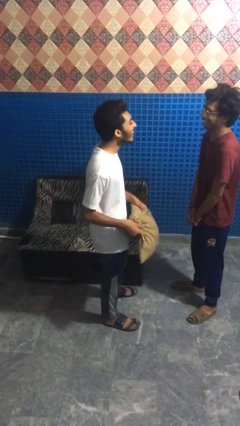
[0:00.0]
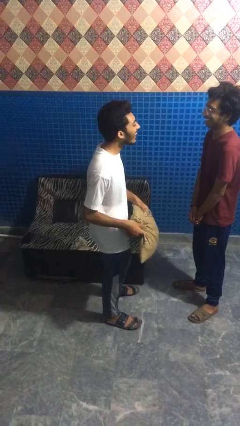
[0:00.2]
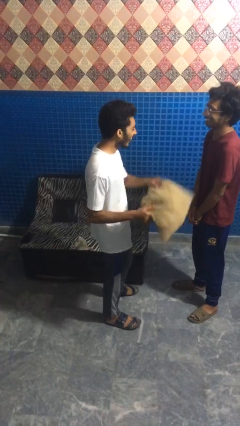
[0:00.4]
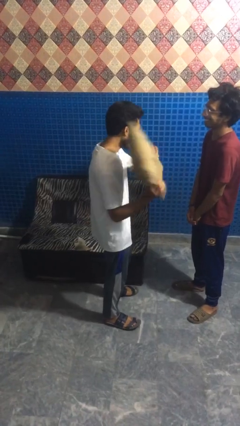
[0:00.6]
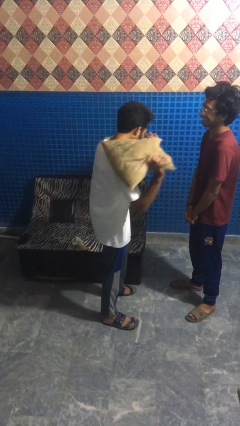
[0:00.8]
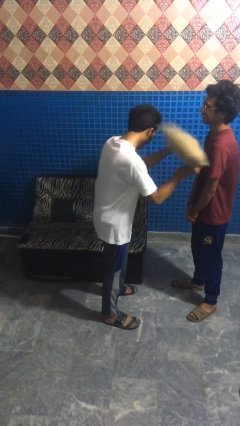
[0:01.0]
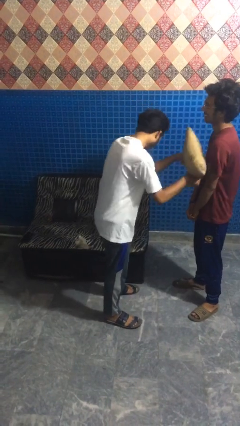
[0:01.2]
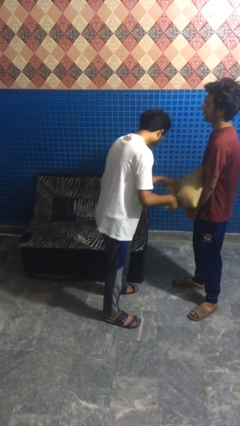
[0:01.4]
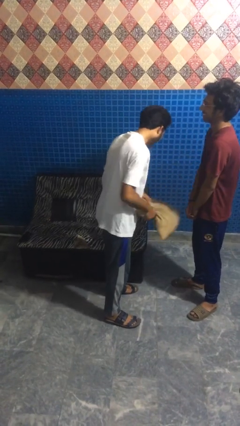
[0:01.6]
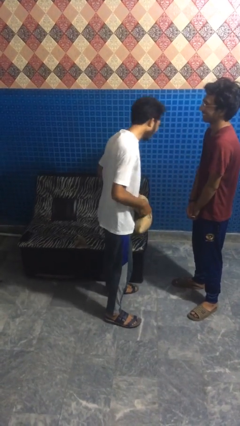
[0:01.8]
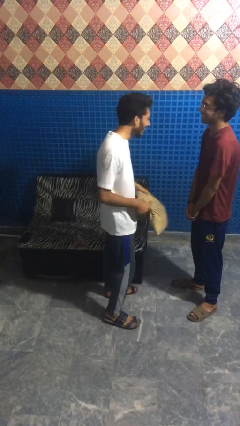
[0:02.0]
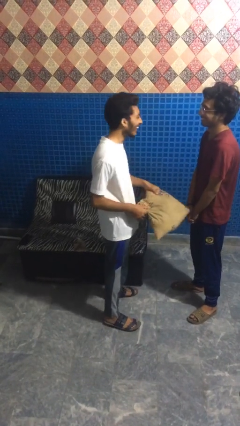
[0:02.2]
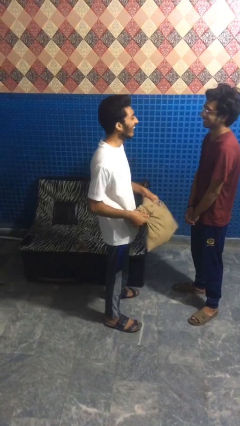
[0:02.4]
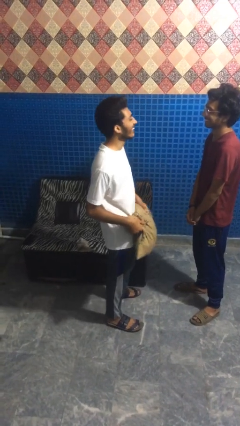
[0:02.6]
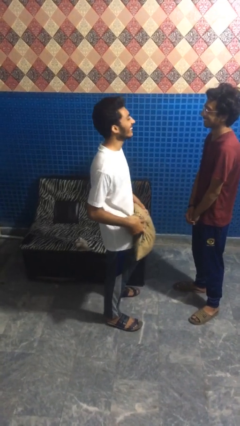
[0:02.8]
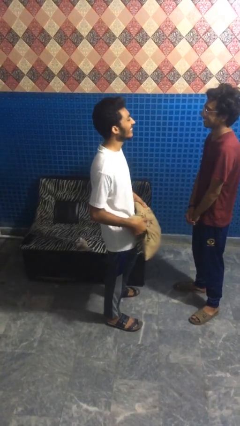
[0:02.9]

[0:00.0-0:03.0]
person hits person with pillow

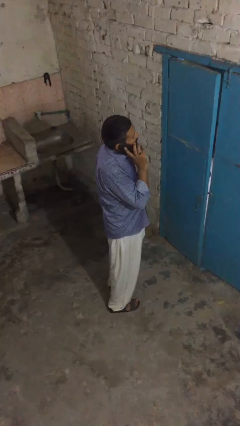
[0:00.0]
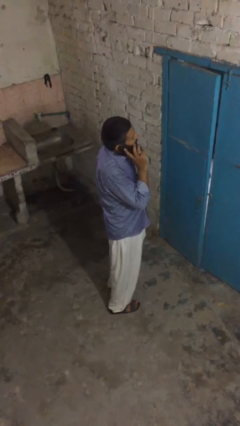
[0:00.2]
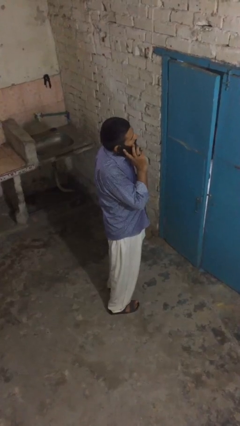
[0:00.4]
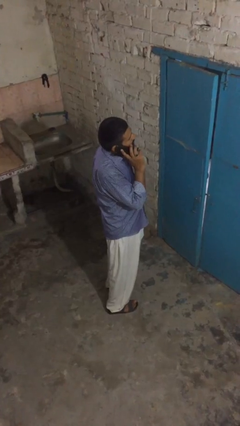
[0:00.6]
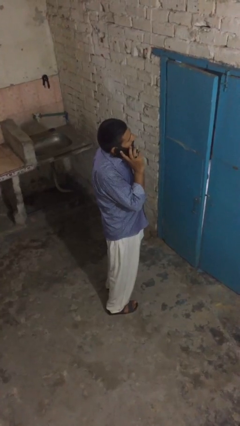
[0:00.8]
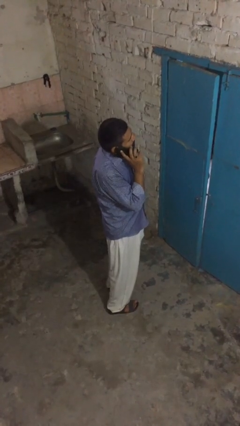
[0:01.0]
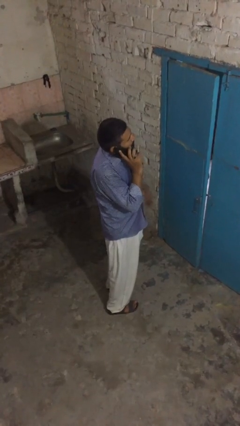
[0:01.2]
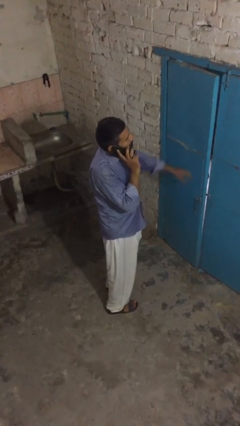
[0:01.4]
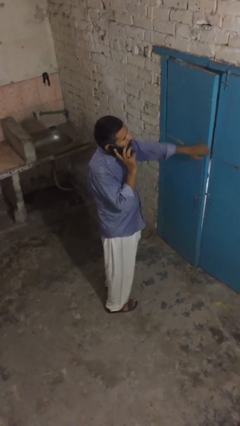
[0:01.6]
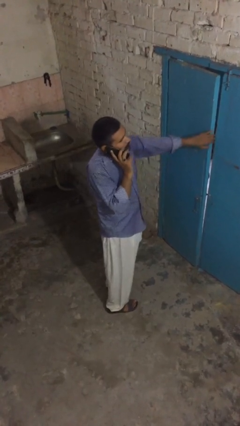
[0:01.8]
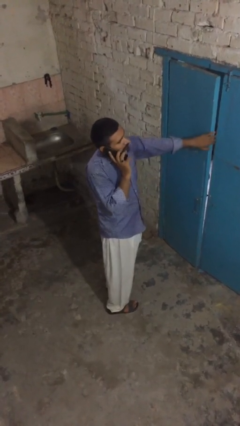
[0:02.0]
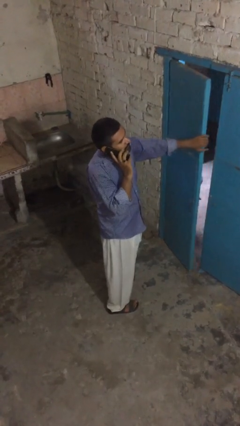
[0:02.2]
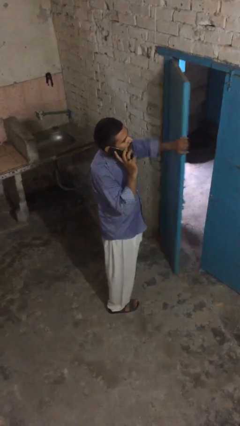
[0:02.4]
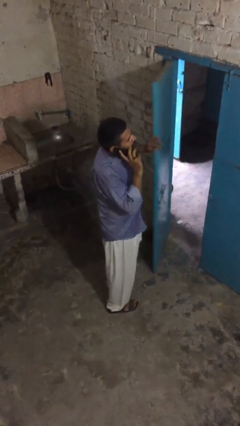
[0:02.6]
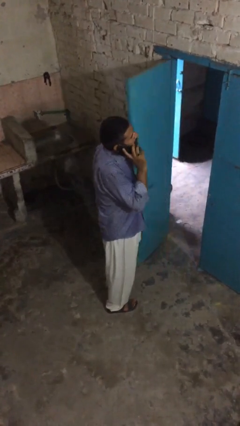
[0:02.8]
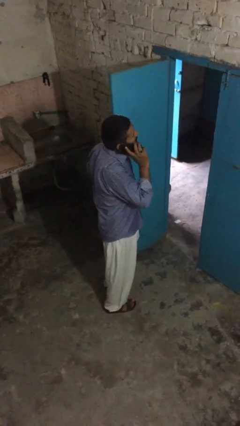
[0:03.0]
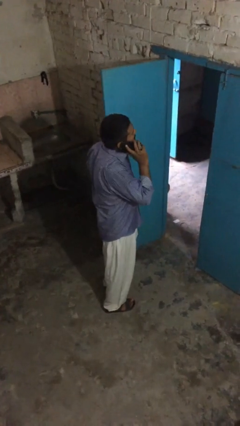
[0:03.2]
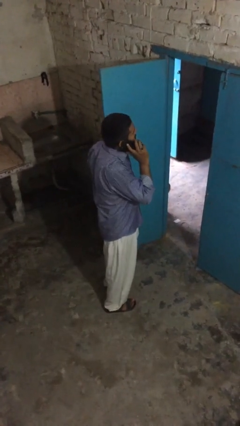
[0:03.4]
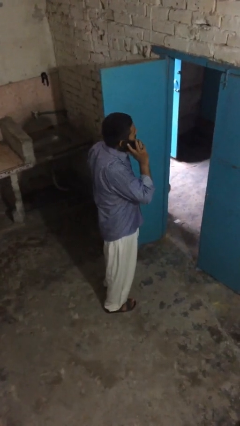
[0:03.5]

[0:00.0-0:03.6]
person opens facility door

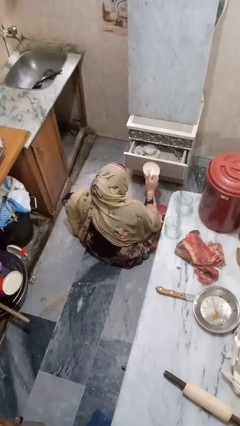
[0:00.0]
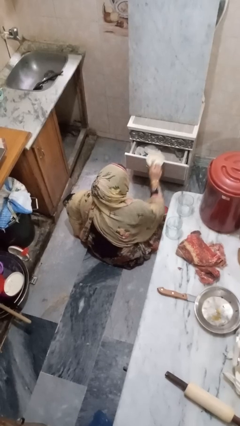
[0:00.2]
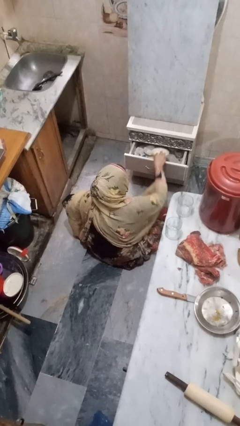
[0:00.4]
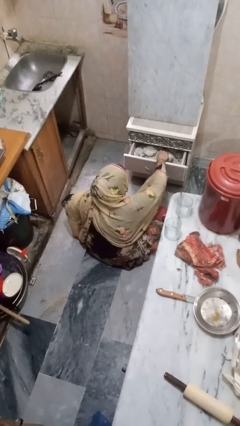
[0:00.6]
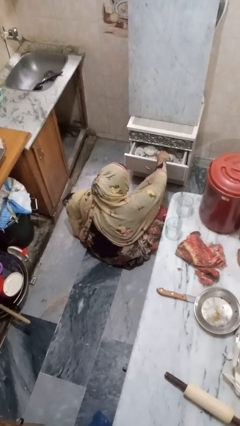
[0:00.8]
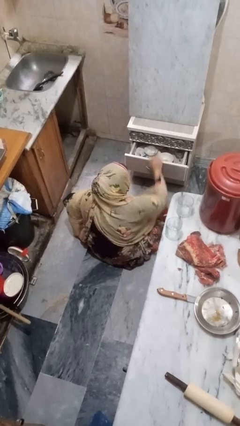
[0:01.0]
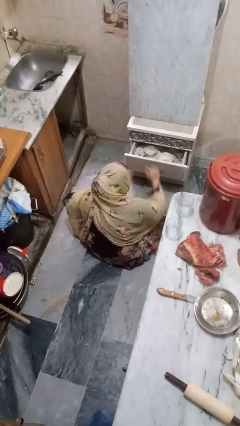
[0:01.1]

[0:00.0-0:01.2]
person puts object into kitchen drawer

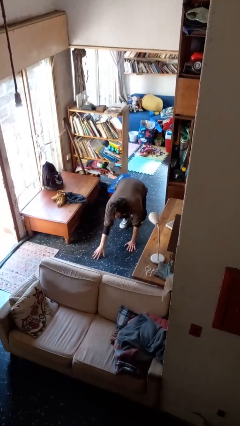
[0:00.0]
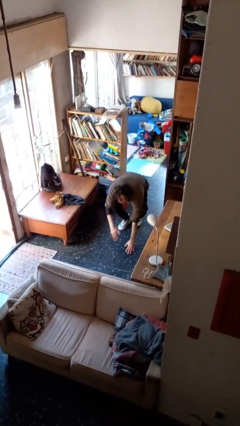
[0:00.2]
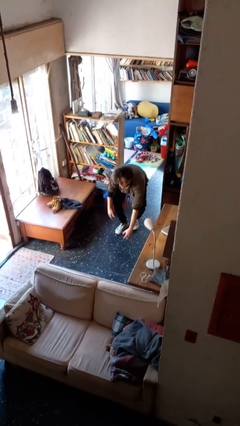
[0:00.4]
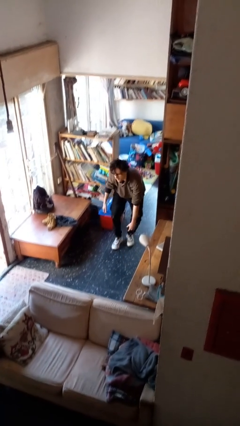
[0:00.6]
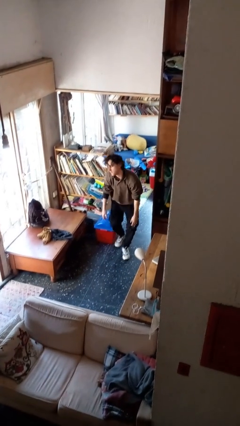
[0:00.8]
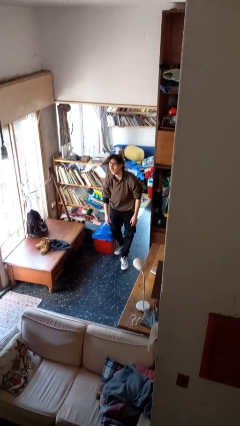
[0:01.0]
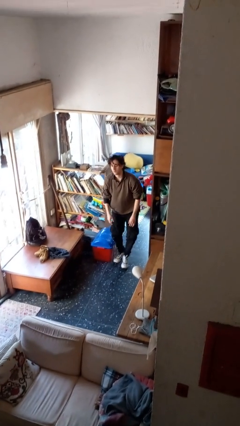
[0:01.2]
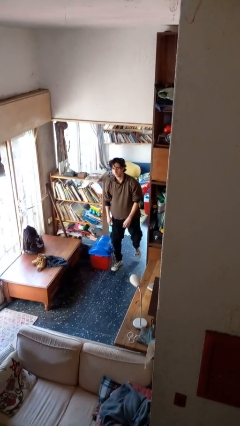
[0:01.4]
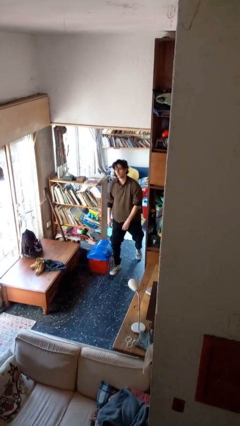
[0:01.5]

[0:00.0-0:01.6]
person stands up from floor

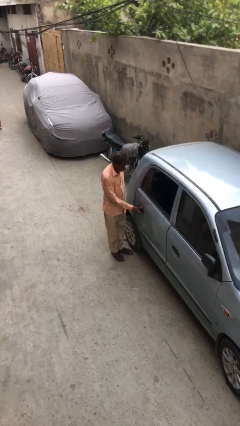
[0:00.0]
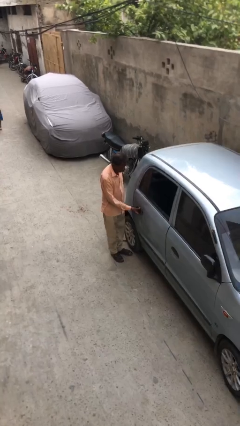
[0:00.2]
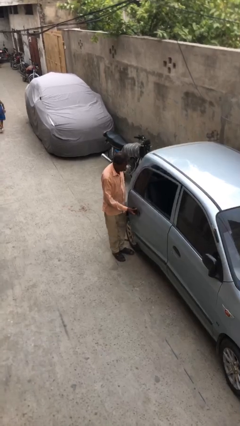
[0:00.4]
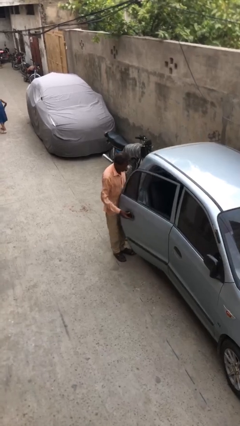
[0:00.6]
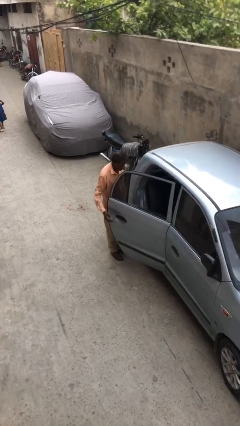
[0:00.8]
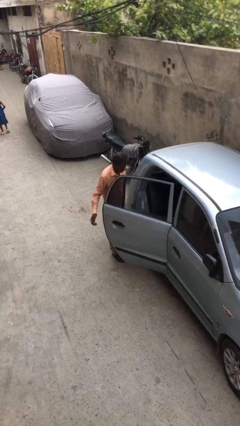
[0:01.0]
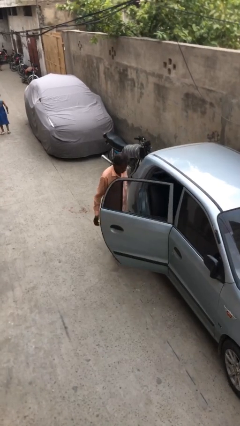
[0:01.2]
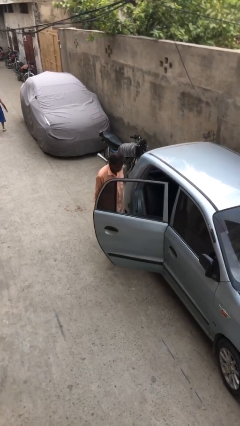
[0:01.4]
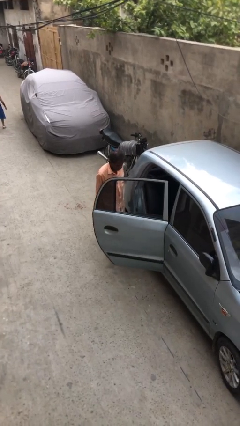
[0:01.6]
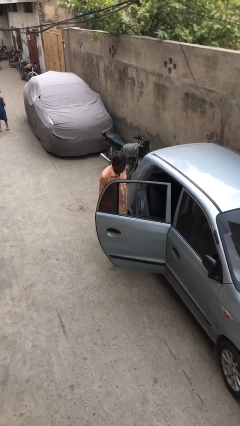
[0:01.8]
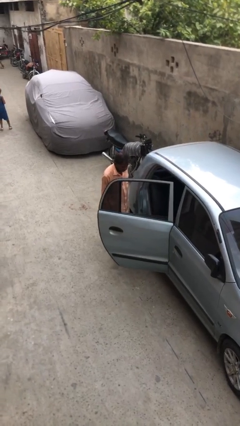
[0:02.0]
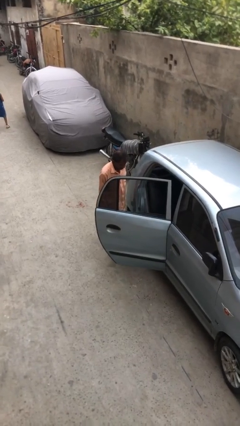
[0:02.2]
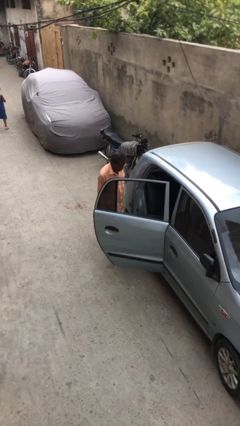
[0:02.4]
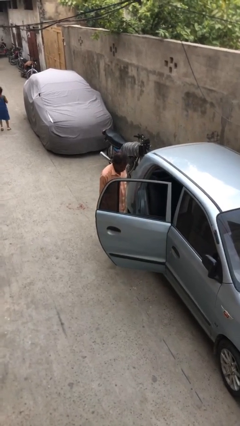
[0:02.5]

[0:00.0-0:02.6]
person opens car door

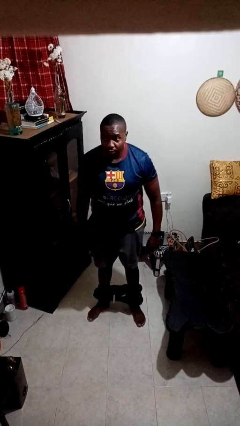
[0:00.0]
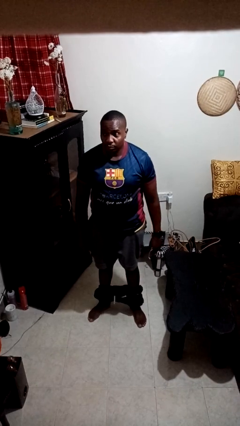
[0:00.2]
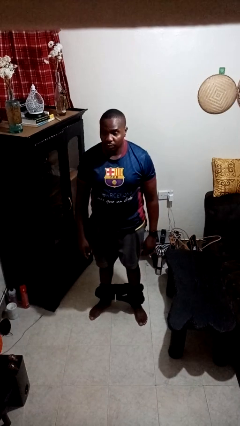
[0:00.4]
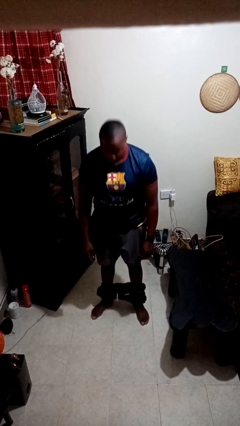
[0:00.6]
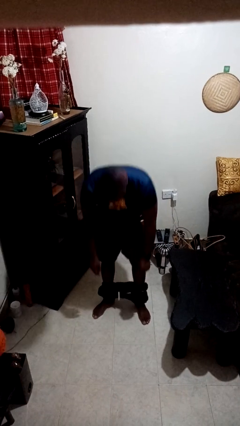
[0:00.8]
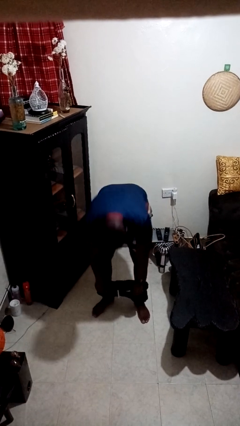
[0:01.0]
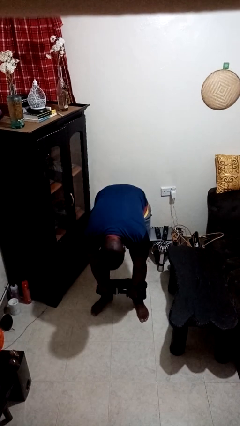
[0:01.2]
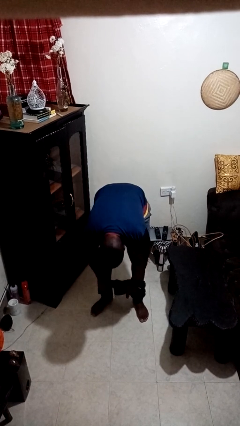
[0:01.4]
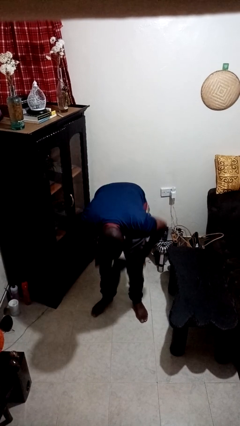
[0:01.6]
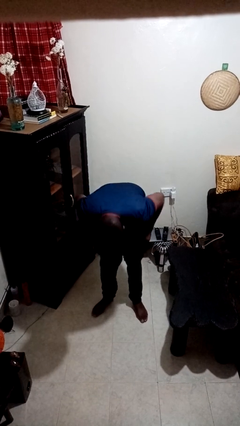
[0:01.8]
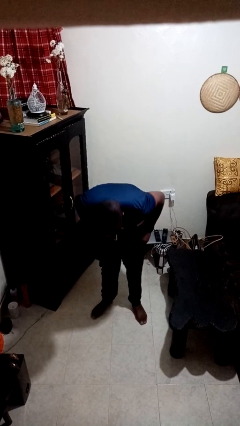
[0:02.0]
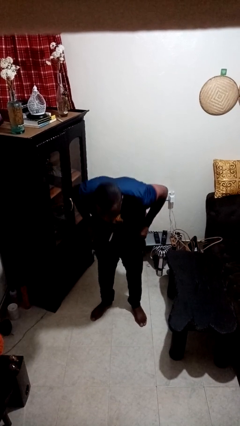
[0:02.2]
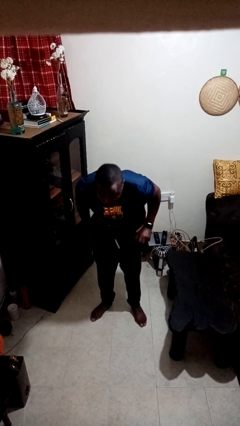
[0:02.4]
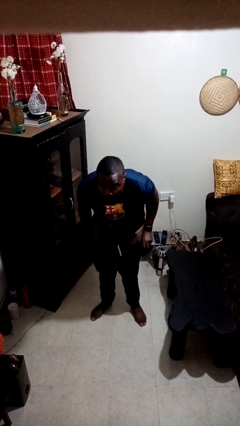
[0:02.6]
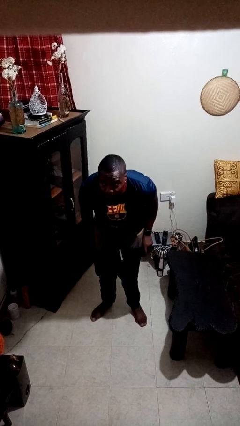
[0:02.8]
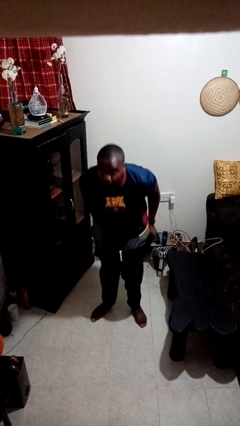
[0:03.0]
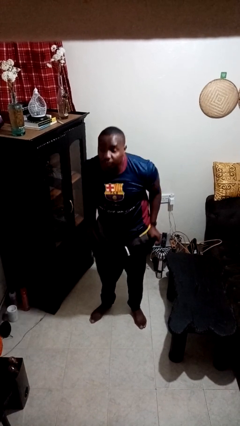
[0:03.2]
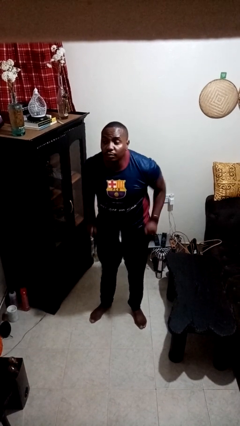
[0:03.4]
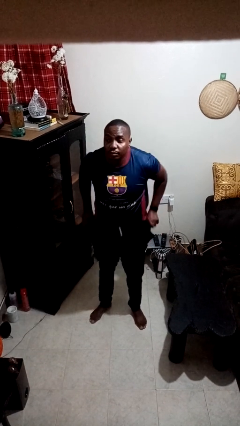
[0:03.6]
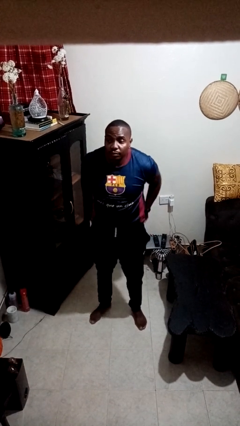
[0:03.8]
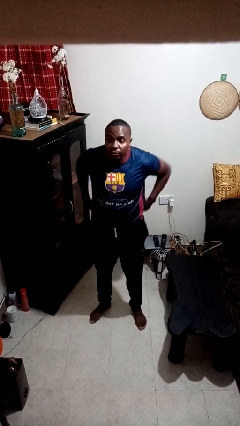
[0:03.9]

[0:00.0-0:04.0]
person puts on pants

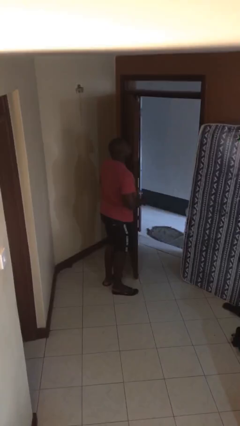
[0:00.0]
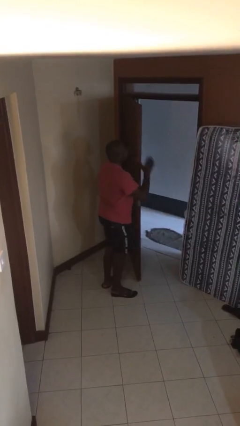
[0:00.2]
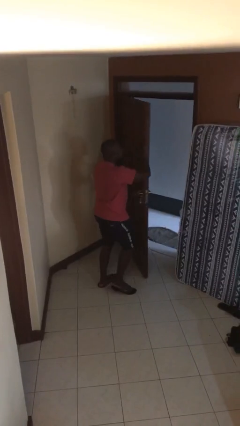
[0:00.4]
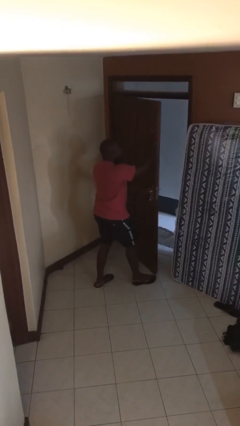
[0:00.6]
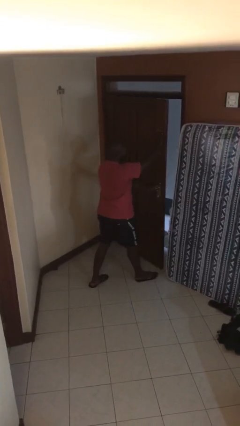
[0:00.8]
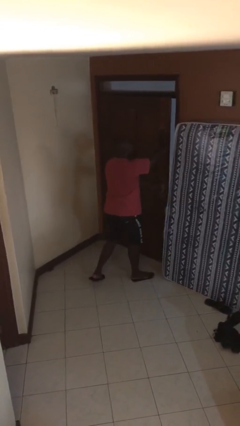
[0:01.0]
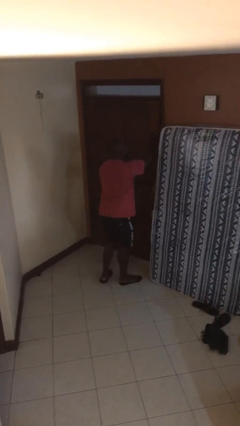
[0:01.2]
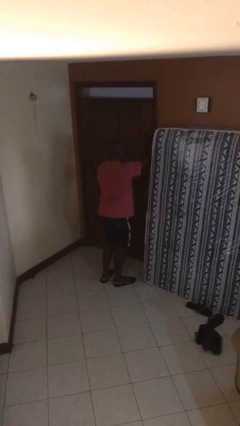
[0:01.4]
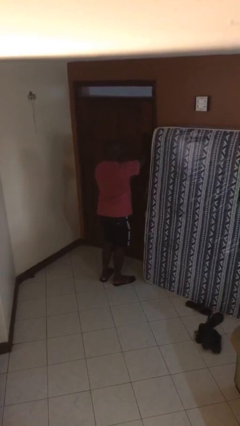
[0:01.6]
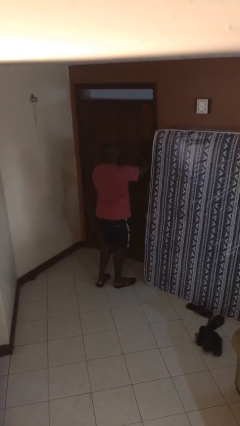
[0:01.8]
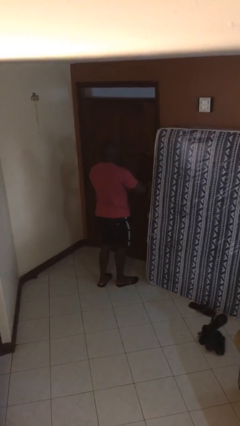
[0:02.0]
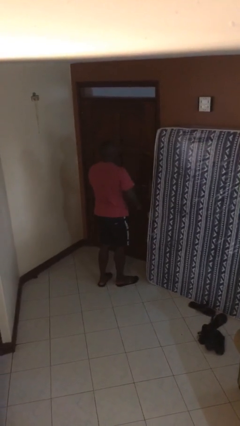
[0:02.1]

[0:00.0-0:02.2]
person closes facility door
